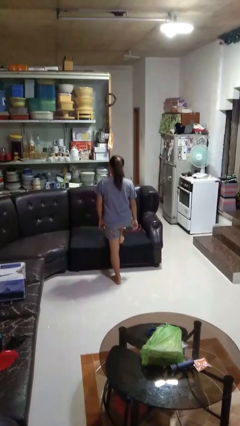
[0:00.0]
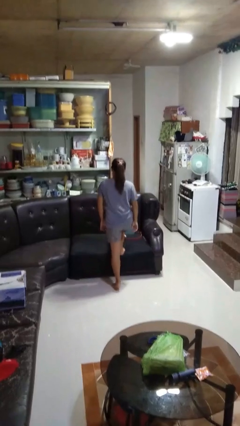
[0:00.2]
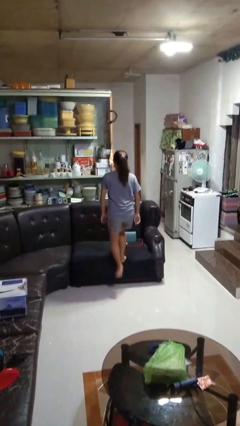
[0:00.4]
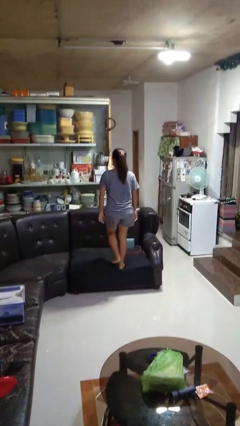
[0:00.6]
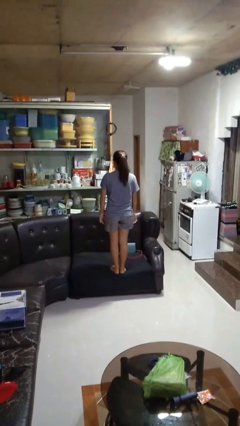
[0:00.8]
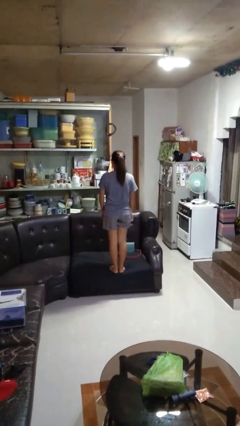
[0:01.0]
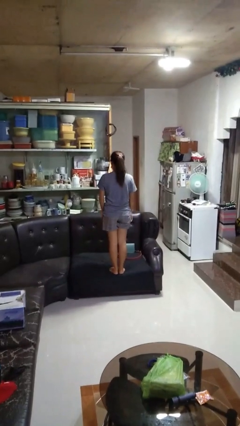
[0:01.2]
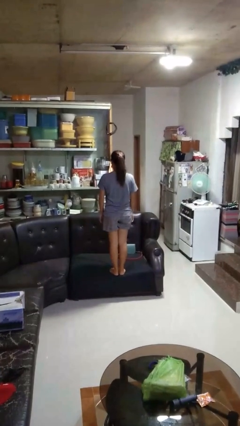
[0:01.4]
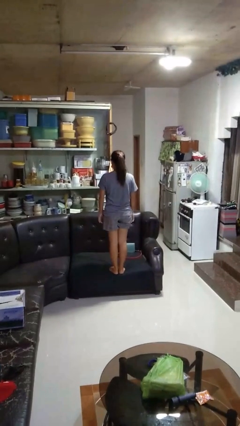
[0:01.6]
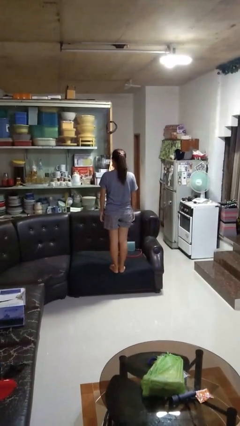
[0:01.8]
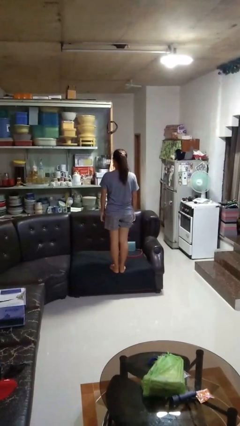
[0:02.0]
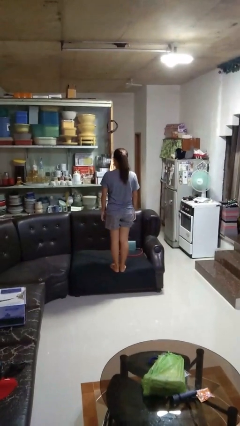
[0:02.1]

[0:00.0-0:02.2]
person climbs on couch

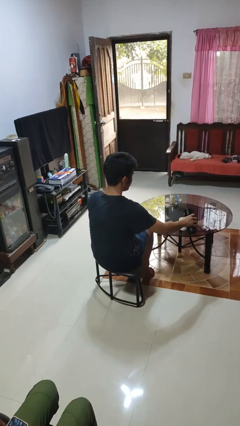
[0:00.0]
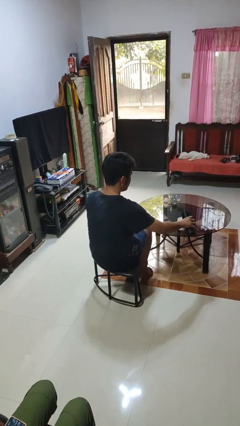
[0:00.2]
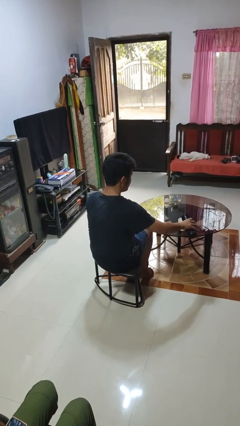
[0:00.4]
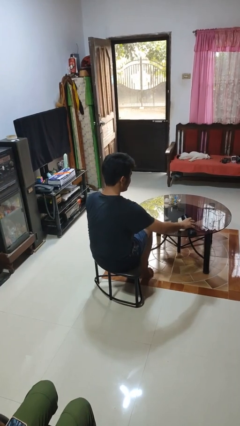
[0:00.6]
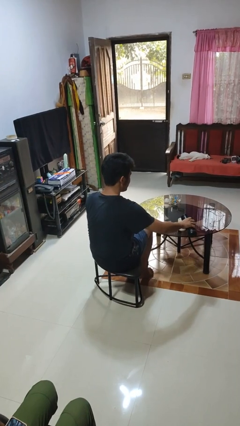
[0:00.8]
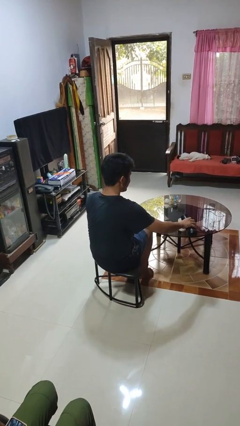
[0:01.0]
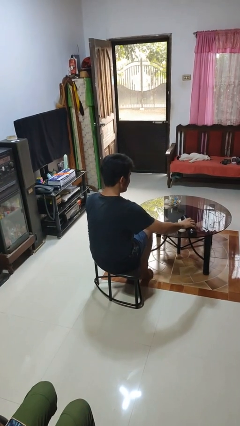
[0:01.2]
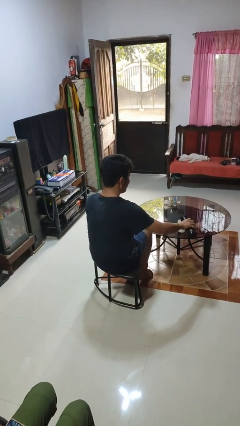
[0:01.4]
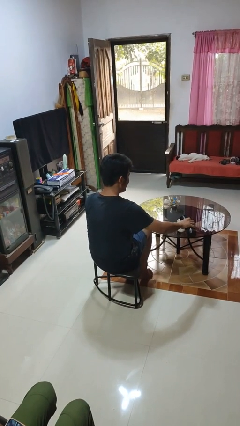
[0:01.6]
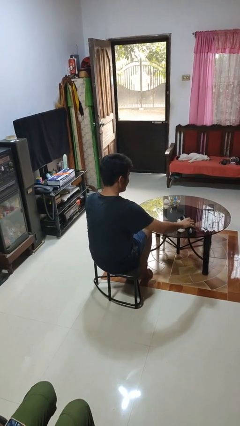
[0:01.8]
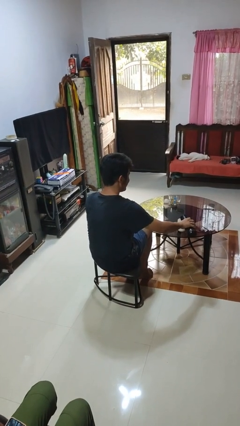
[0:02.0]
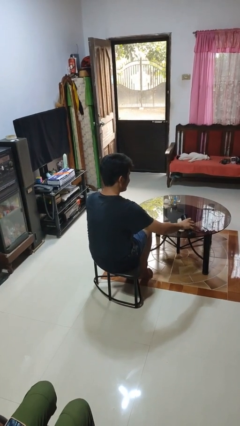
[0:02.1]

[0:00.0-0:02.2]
person pours liquid into cup

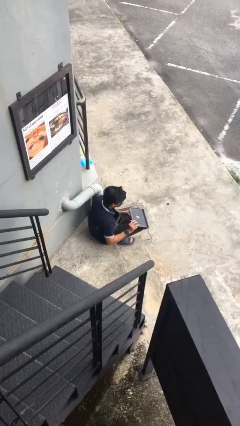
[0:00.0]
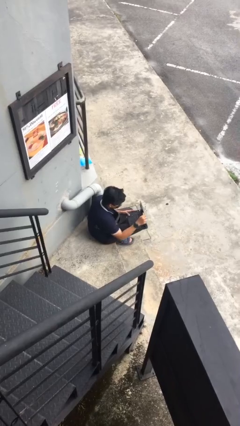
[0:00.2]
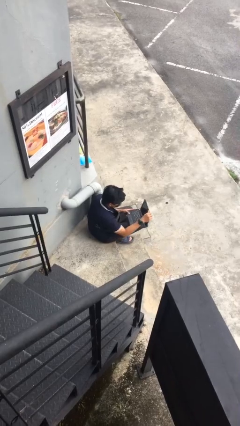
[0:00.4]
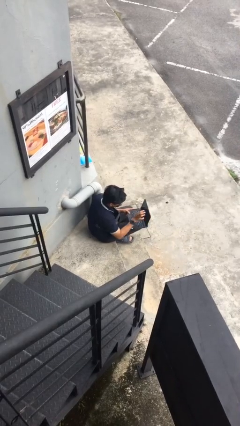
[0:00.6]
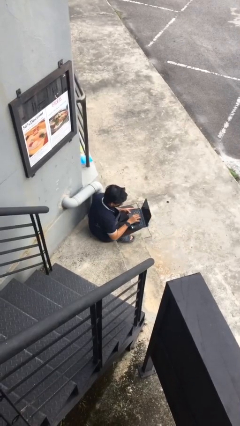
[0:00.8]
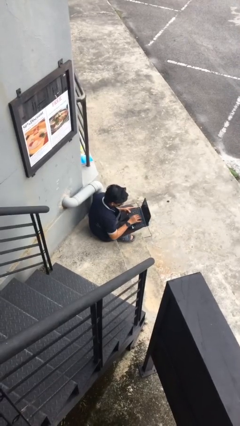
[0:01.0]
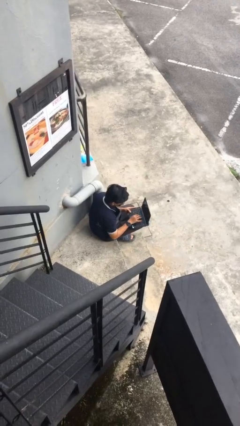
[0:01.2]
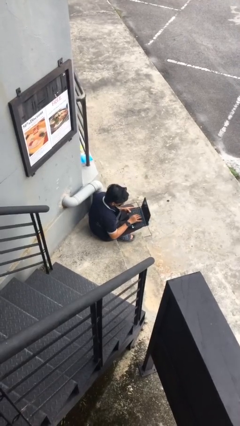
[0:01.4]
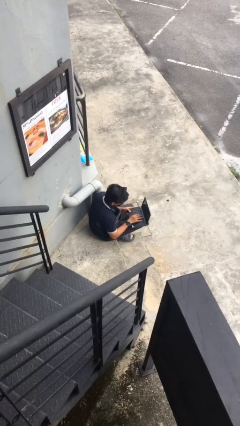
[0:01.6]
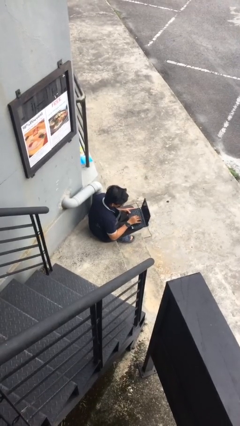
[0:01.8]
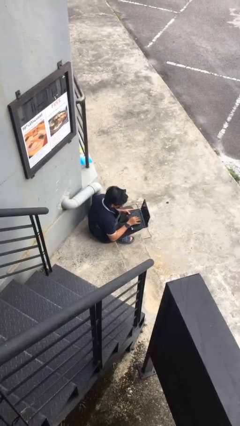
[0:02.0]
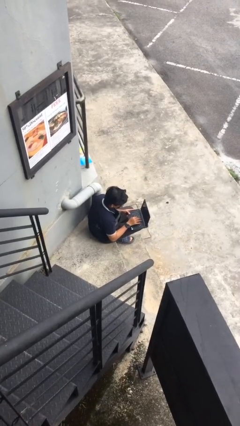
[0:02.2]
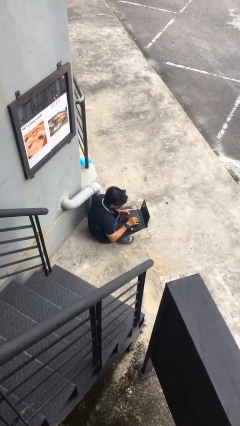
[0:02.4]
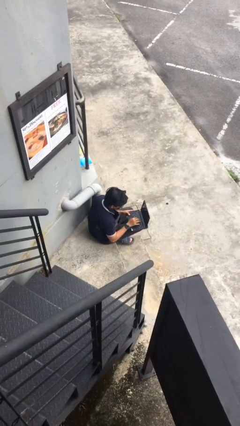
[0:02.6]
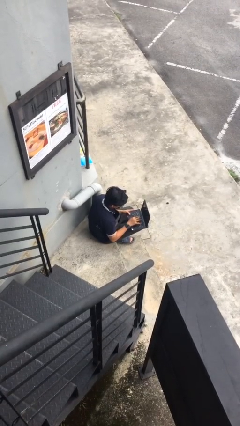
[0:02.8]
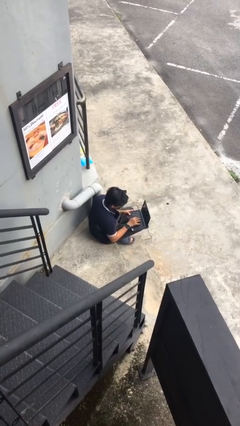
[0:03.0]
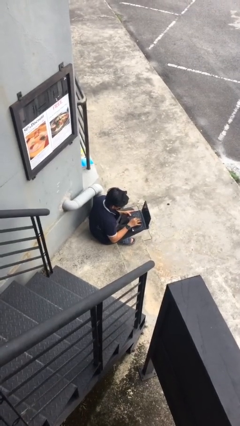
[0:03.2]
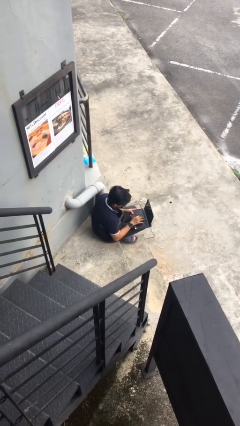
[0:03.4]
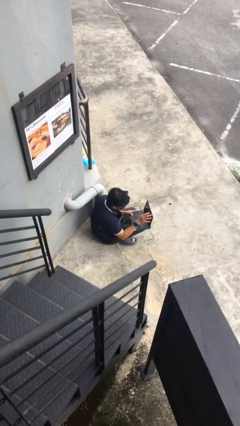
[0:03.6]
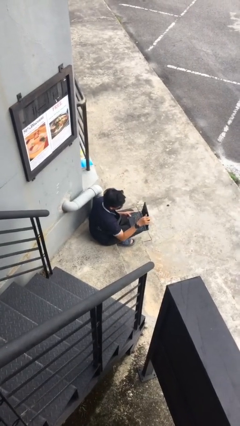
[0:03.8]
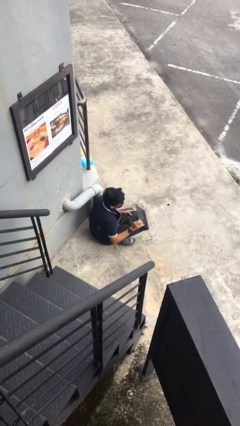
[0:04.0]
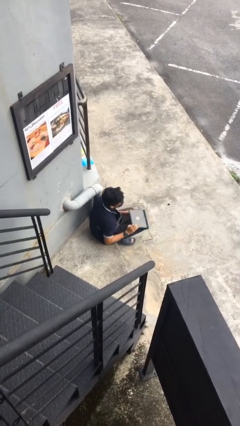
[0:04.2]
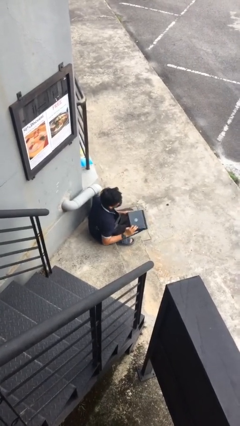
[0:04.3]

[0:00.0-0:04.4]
person interacts with laptop

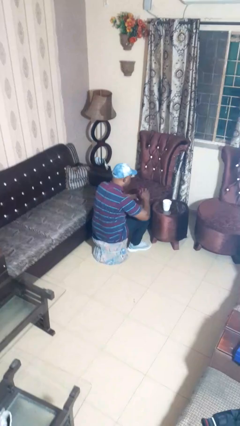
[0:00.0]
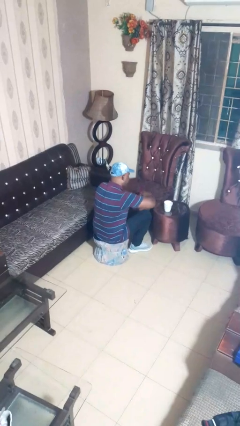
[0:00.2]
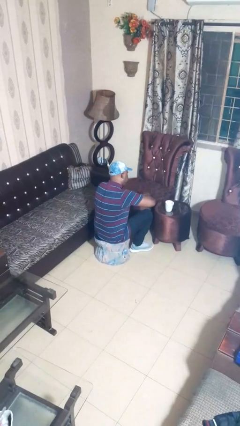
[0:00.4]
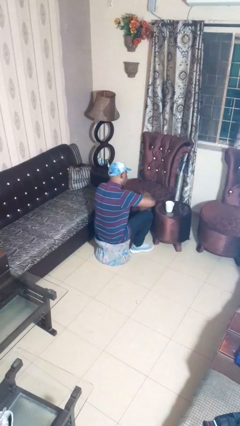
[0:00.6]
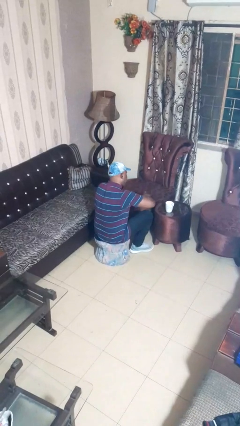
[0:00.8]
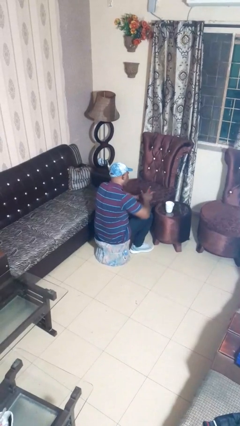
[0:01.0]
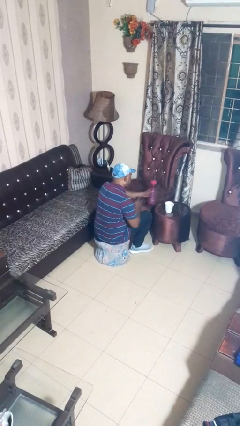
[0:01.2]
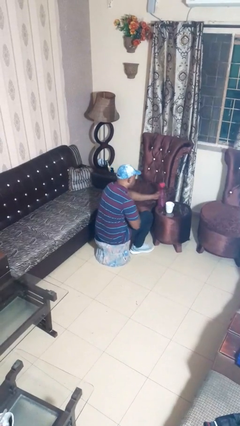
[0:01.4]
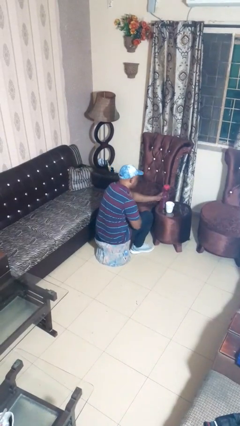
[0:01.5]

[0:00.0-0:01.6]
person screws lid to bottle

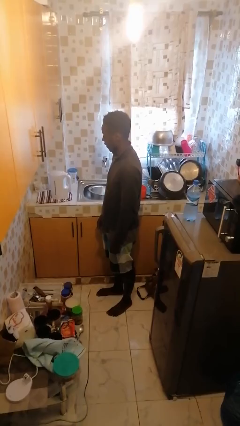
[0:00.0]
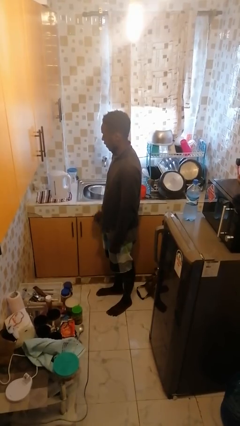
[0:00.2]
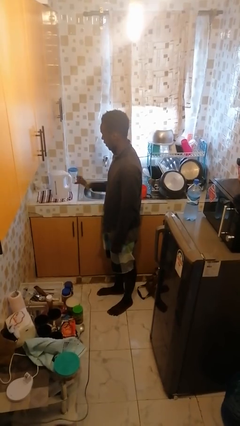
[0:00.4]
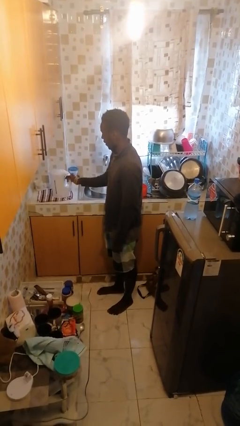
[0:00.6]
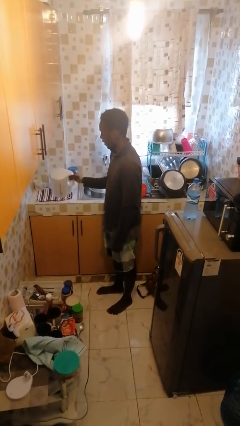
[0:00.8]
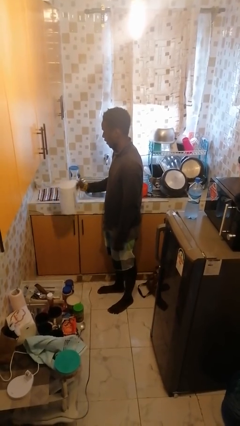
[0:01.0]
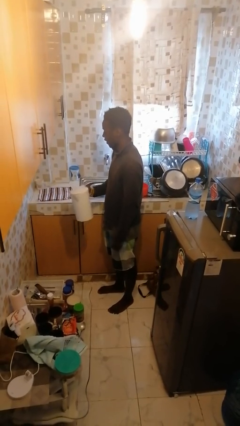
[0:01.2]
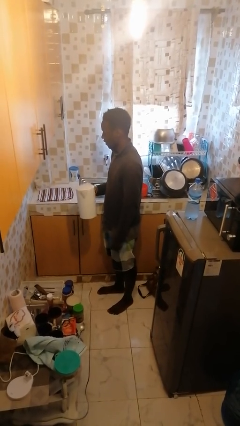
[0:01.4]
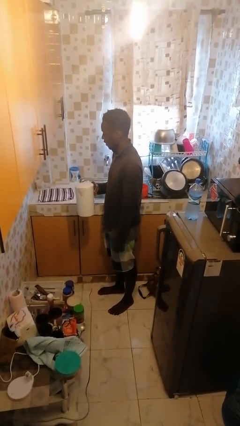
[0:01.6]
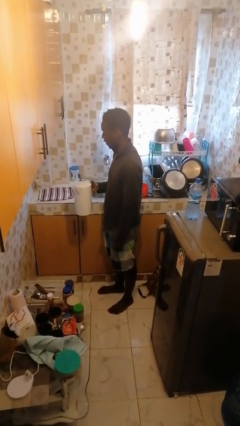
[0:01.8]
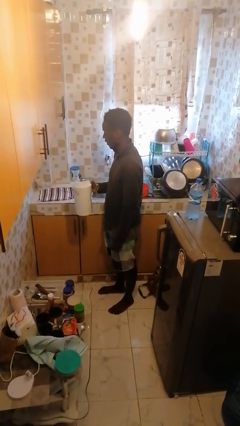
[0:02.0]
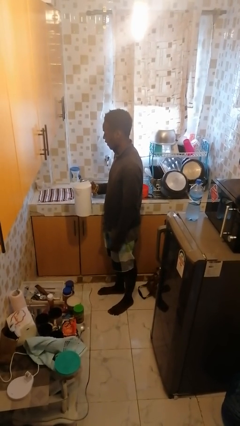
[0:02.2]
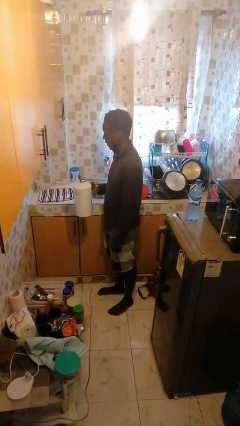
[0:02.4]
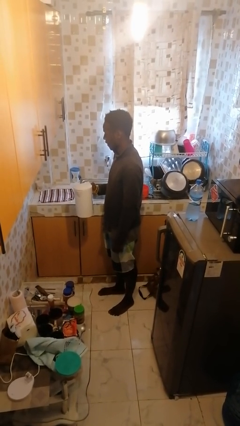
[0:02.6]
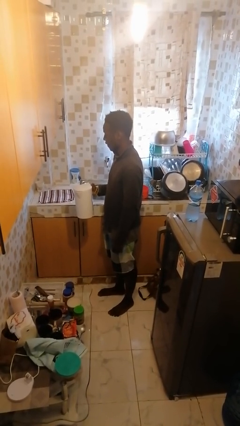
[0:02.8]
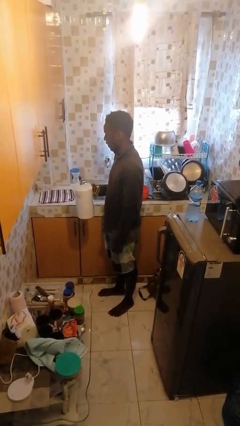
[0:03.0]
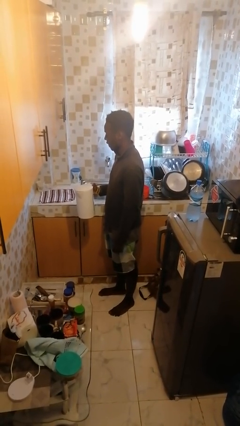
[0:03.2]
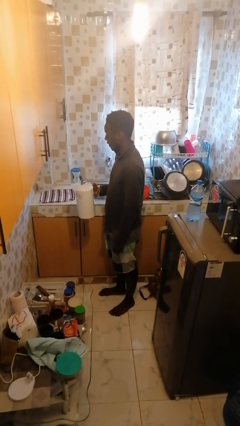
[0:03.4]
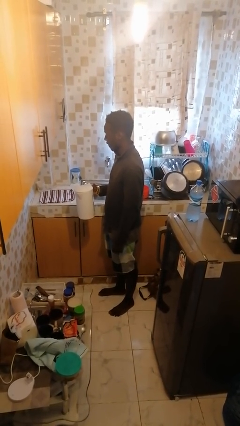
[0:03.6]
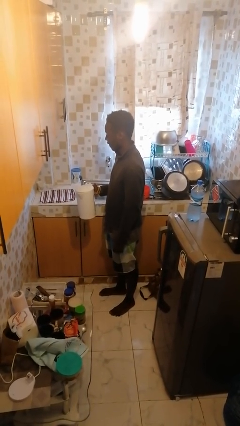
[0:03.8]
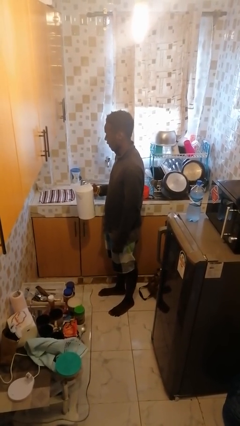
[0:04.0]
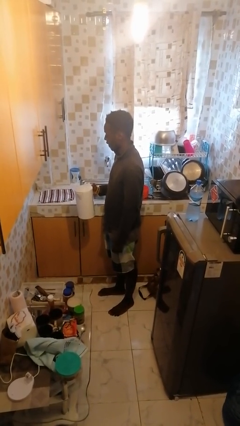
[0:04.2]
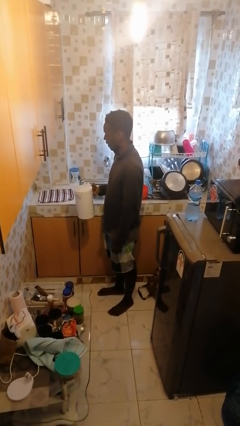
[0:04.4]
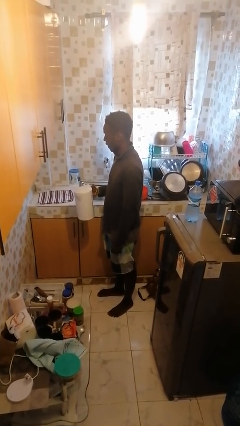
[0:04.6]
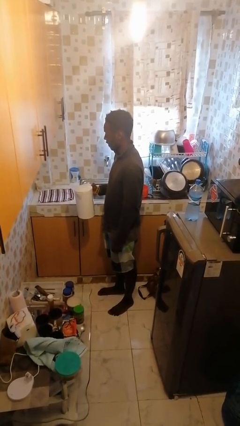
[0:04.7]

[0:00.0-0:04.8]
person picks up object from countertop

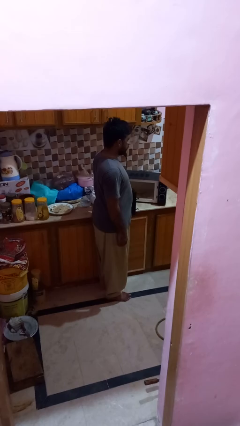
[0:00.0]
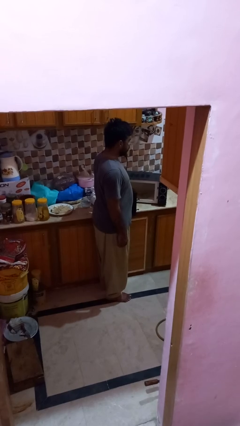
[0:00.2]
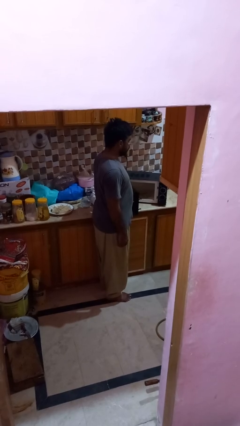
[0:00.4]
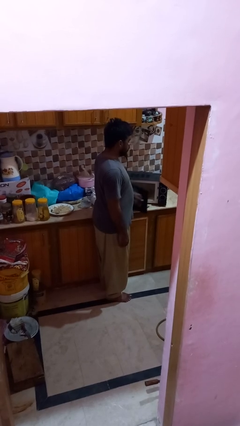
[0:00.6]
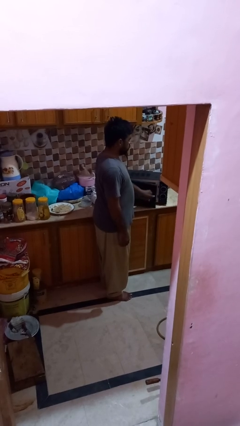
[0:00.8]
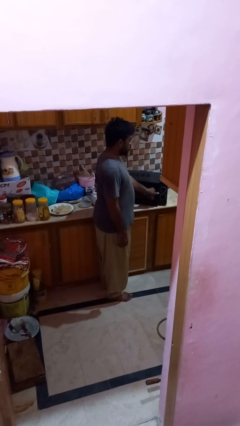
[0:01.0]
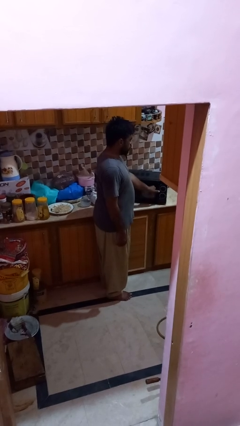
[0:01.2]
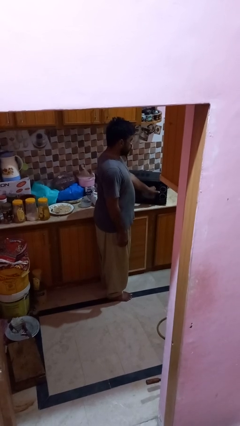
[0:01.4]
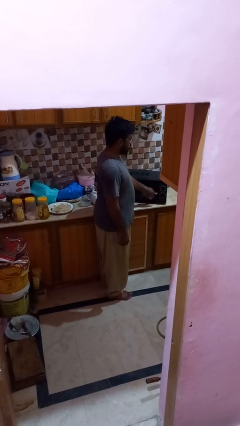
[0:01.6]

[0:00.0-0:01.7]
person closes microwave

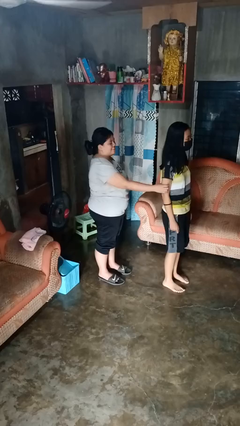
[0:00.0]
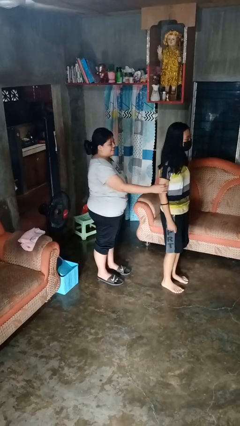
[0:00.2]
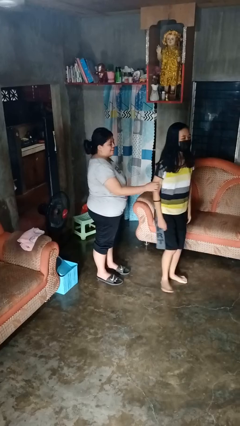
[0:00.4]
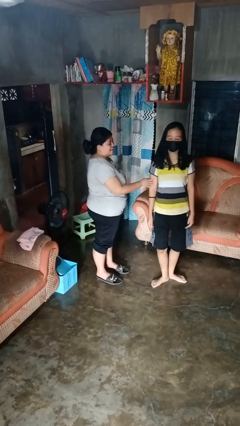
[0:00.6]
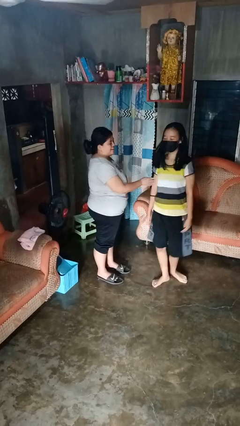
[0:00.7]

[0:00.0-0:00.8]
person spins person around
